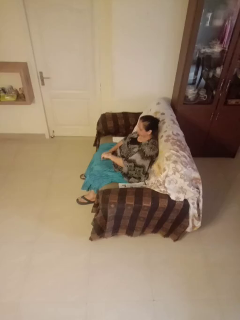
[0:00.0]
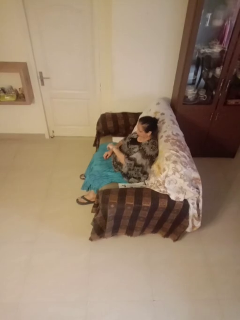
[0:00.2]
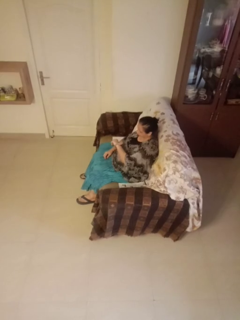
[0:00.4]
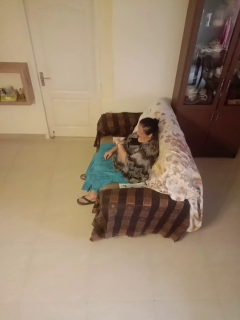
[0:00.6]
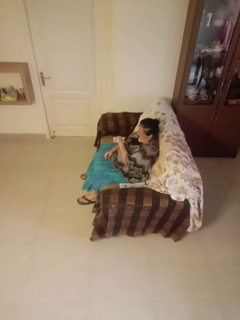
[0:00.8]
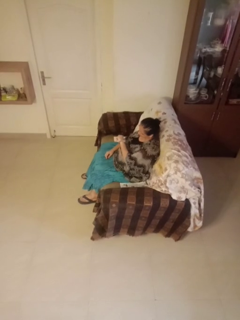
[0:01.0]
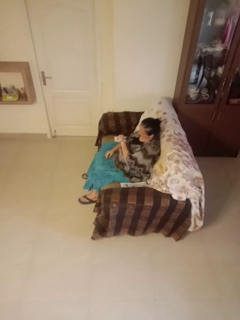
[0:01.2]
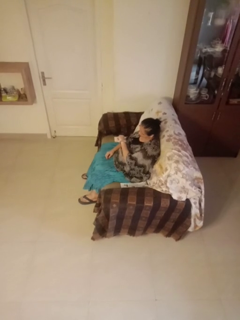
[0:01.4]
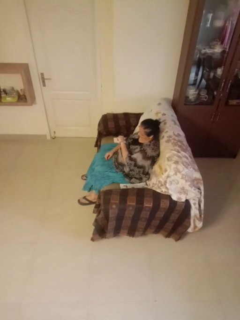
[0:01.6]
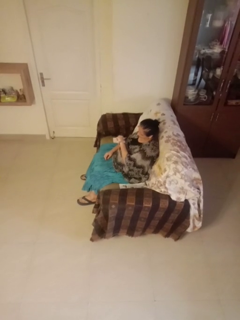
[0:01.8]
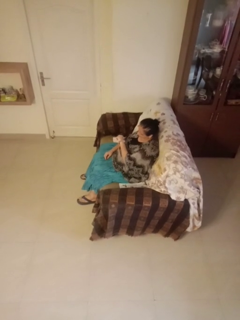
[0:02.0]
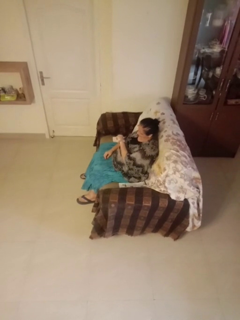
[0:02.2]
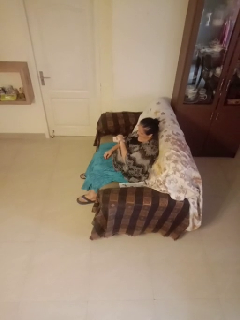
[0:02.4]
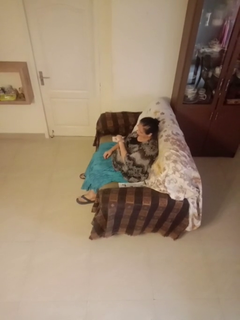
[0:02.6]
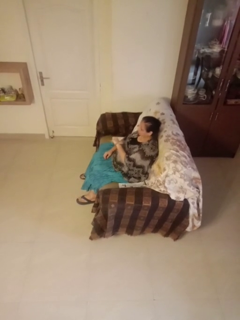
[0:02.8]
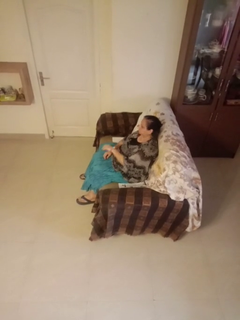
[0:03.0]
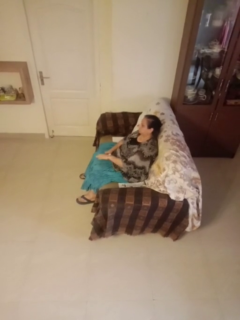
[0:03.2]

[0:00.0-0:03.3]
person looks at wristwatch

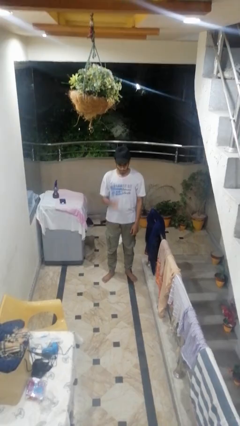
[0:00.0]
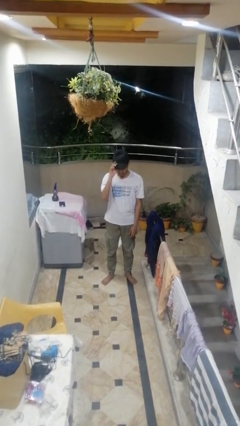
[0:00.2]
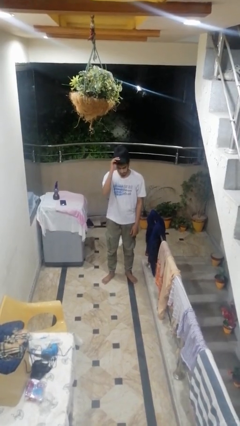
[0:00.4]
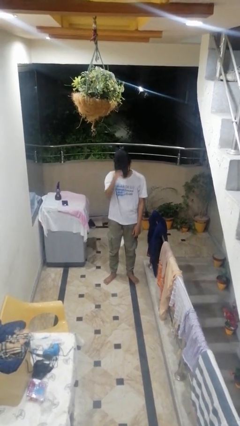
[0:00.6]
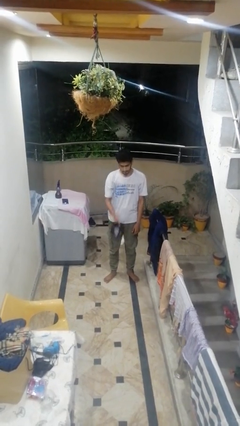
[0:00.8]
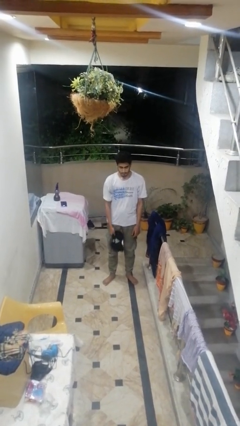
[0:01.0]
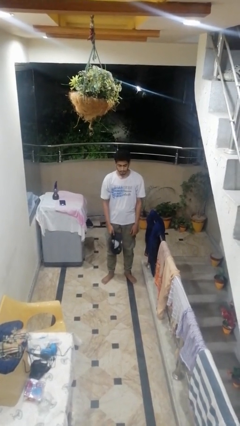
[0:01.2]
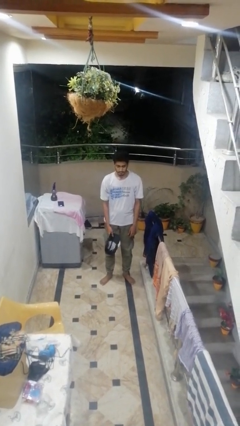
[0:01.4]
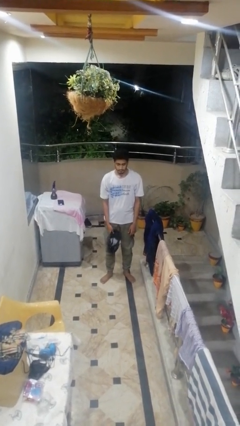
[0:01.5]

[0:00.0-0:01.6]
person takes off hat

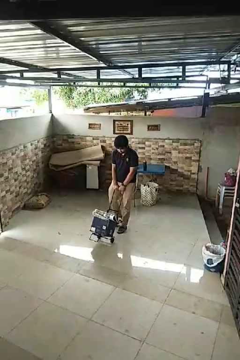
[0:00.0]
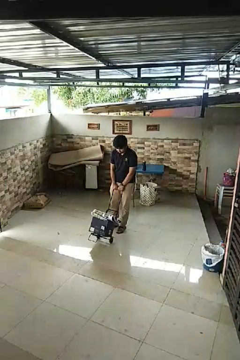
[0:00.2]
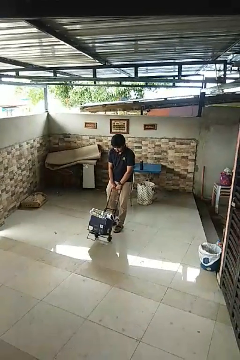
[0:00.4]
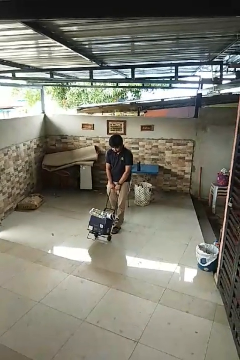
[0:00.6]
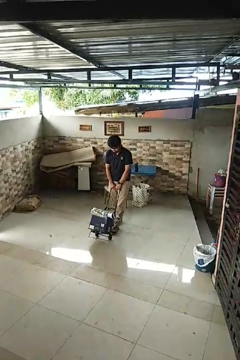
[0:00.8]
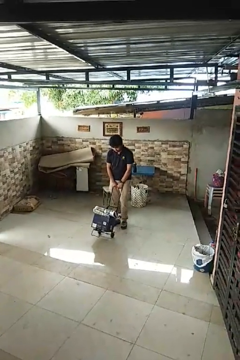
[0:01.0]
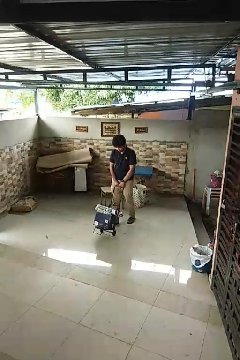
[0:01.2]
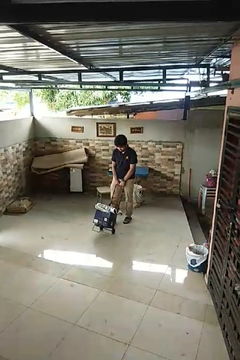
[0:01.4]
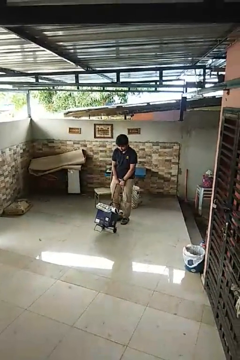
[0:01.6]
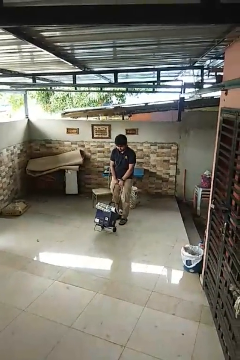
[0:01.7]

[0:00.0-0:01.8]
person pulls wheeled cart

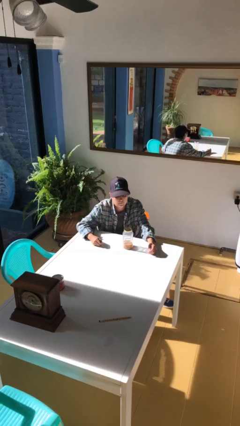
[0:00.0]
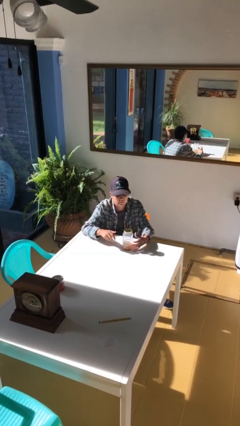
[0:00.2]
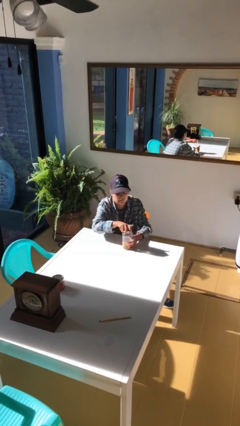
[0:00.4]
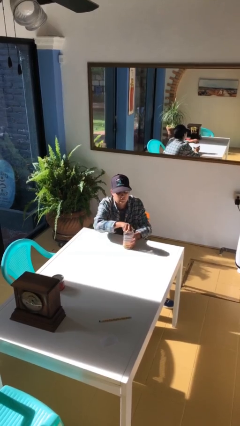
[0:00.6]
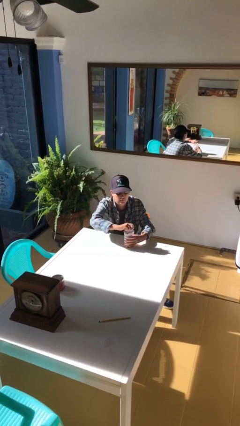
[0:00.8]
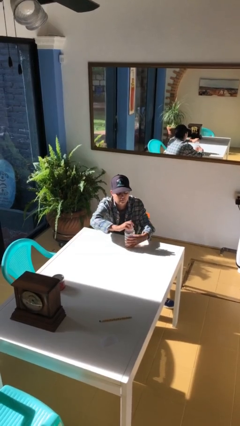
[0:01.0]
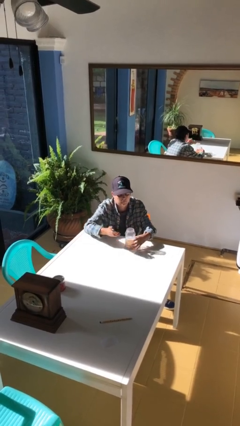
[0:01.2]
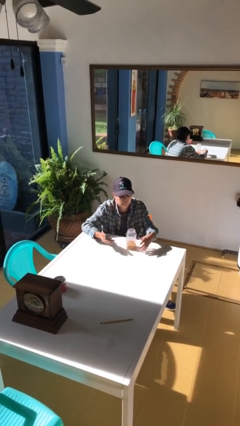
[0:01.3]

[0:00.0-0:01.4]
person opens jar

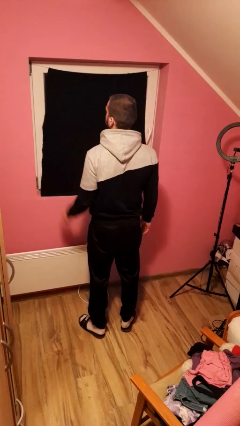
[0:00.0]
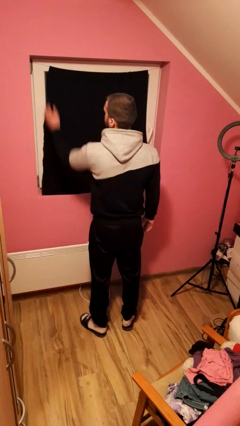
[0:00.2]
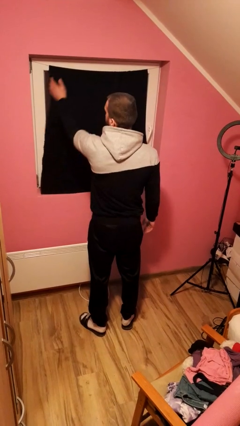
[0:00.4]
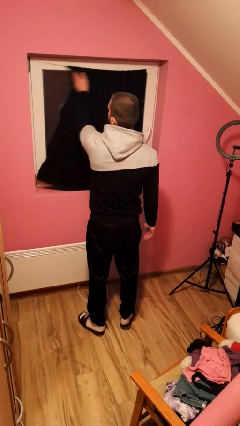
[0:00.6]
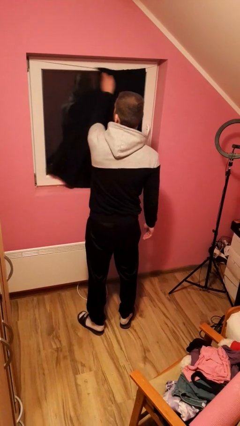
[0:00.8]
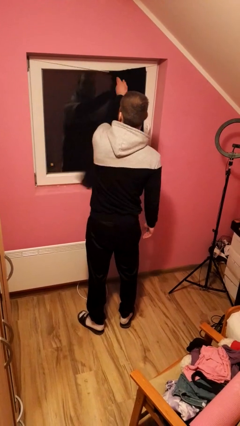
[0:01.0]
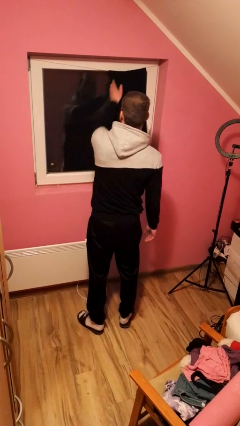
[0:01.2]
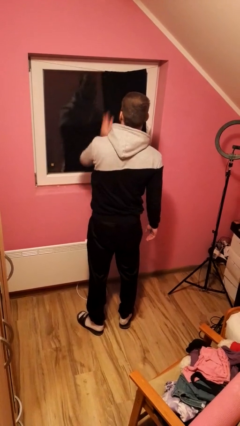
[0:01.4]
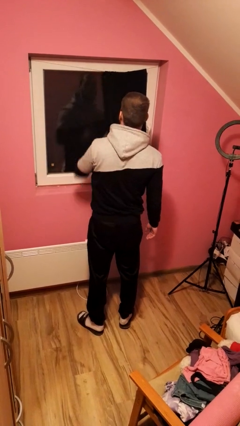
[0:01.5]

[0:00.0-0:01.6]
person opens curtains

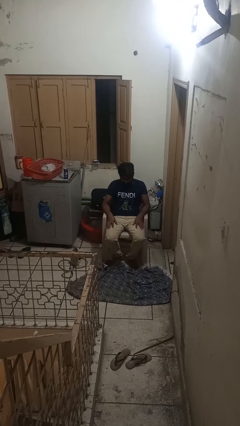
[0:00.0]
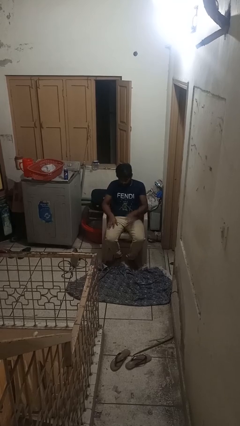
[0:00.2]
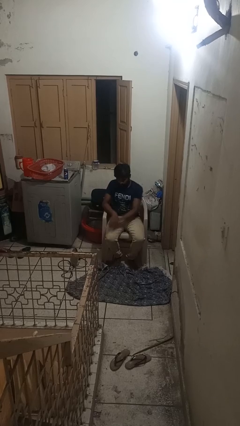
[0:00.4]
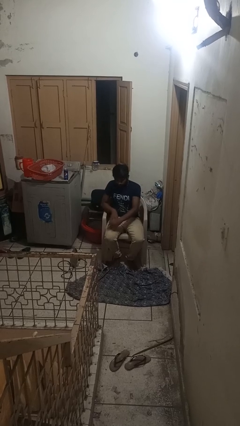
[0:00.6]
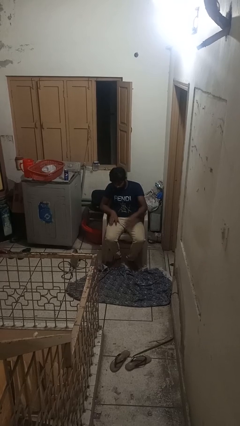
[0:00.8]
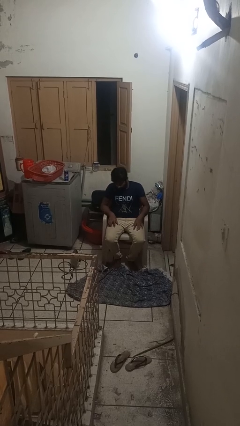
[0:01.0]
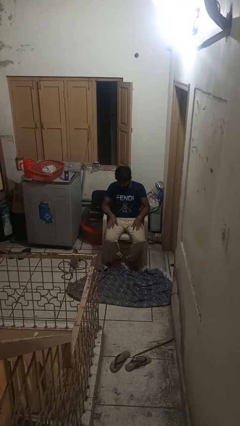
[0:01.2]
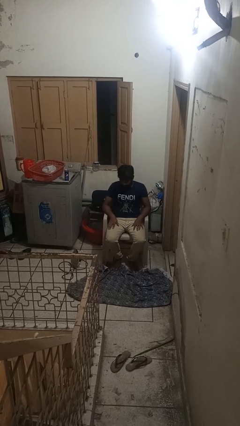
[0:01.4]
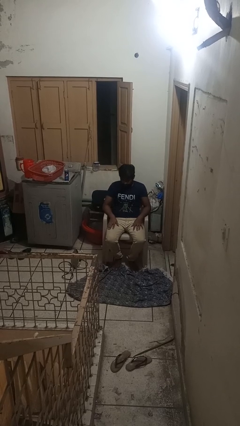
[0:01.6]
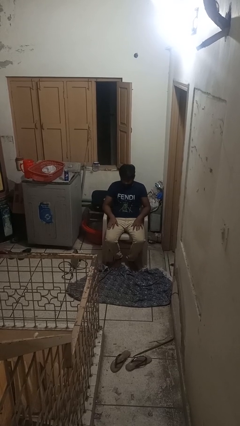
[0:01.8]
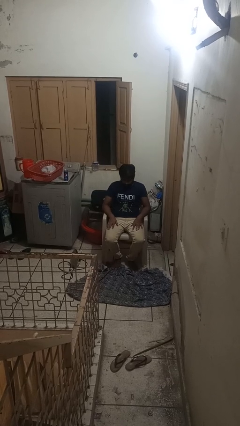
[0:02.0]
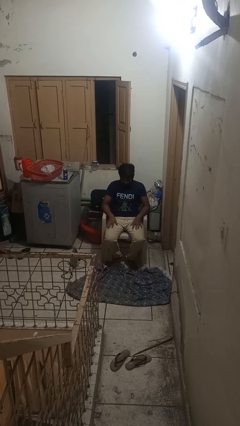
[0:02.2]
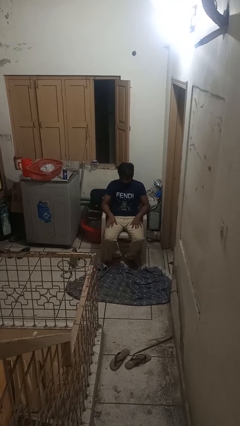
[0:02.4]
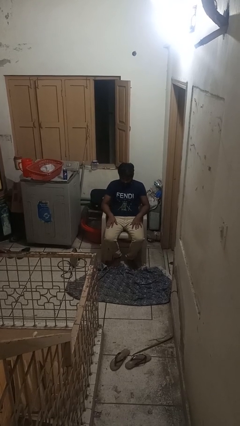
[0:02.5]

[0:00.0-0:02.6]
person swats bug

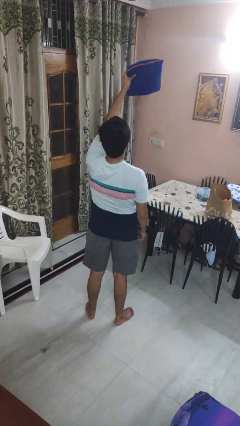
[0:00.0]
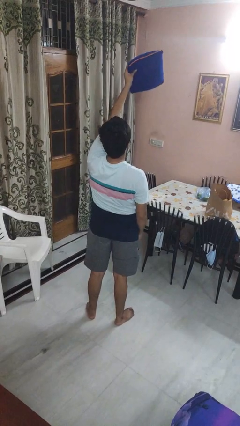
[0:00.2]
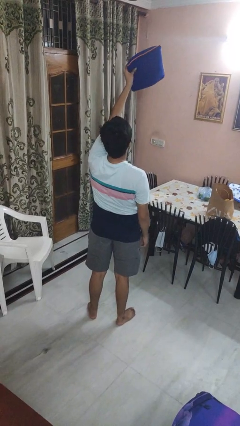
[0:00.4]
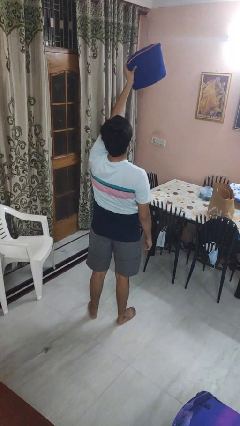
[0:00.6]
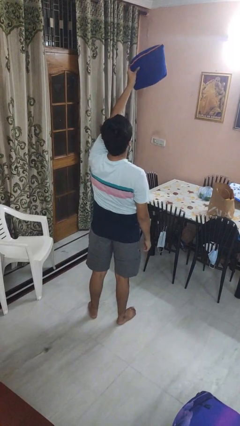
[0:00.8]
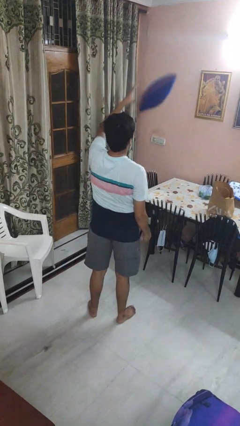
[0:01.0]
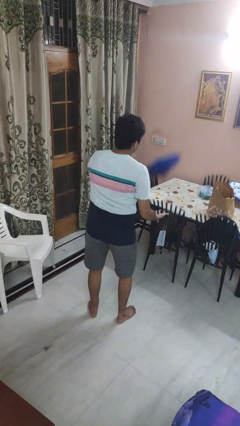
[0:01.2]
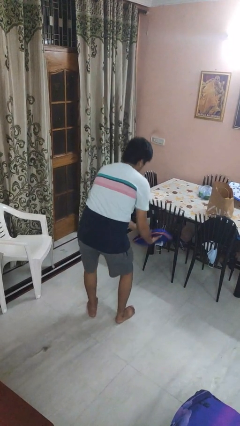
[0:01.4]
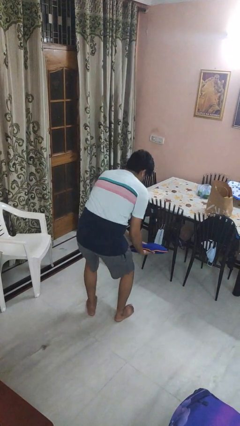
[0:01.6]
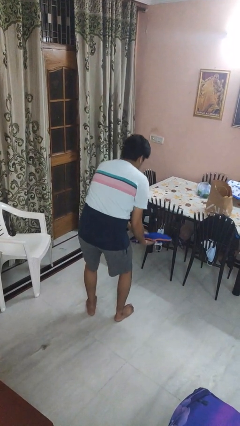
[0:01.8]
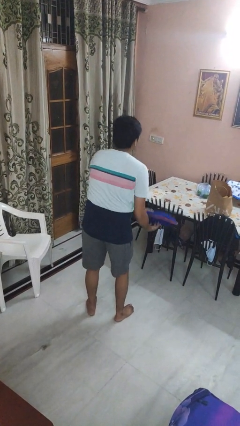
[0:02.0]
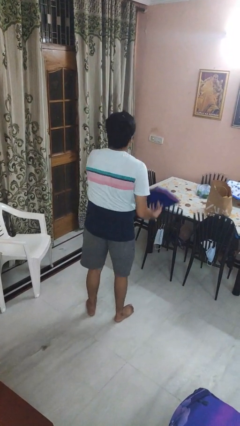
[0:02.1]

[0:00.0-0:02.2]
person catches dropped object

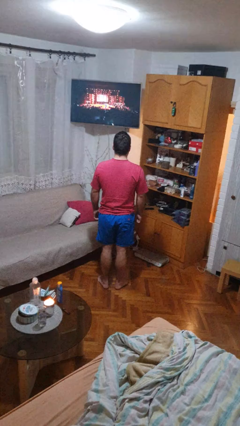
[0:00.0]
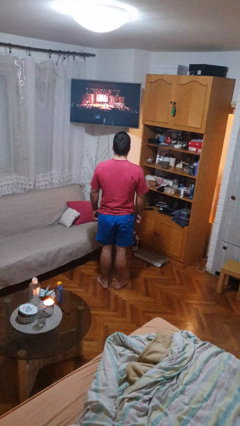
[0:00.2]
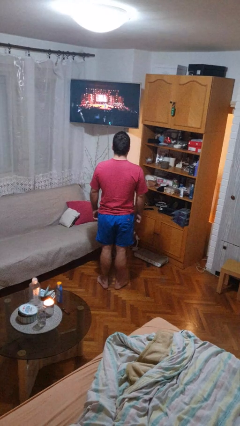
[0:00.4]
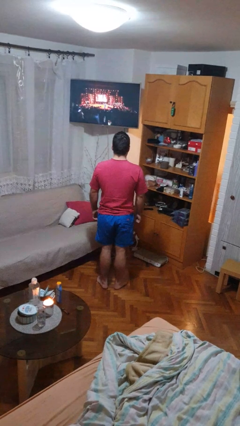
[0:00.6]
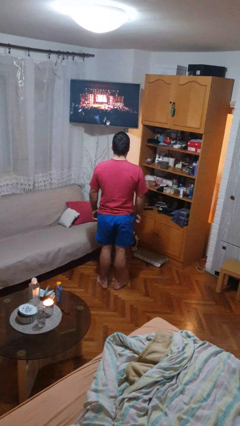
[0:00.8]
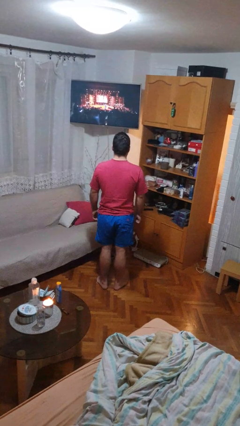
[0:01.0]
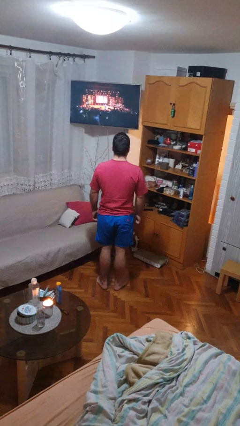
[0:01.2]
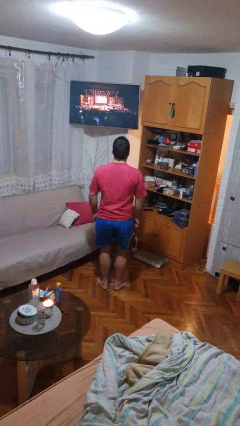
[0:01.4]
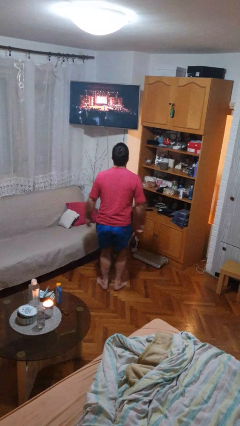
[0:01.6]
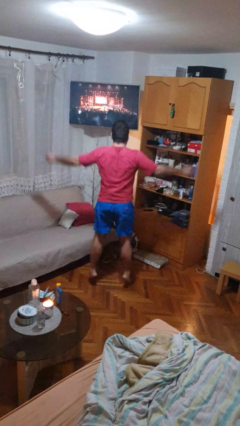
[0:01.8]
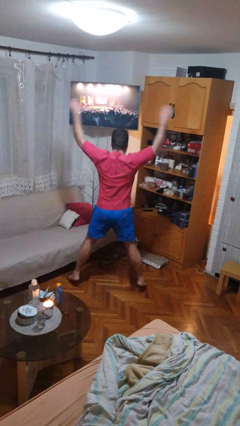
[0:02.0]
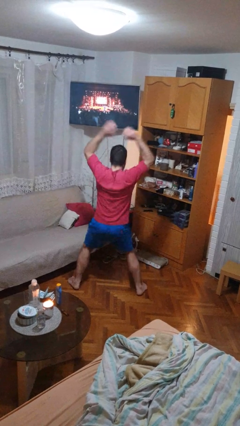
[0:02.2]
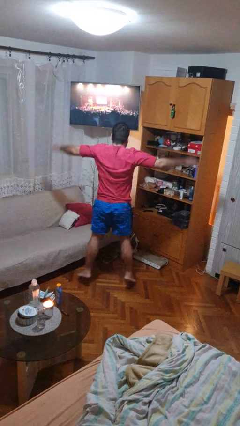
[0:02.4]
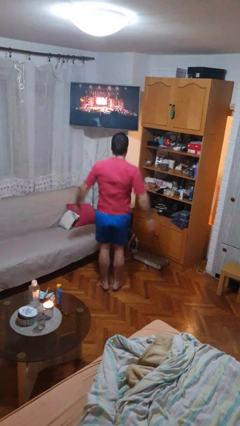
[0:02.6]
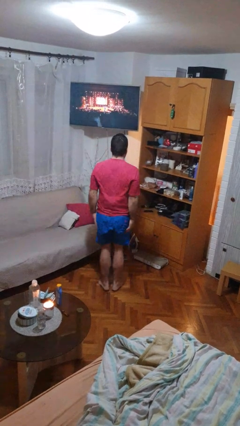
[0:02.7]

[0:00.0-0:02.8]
person exercises with jumping jacks

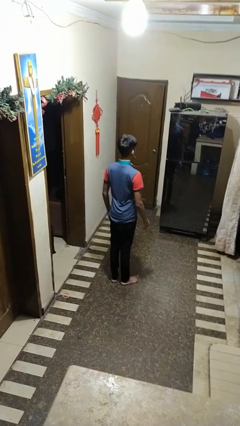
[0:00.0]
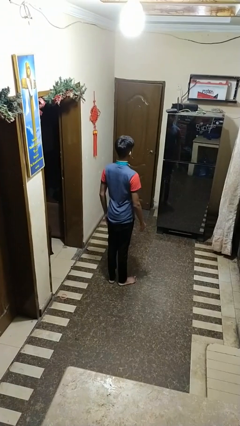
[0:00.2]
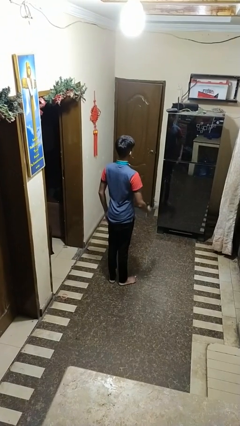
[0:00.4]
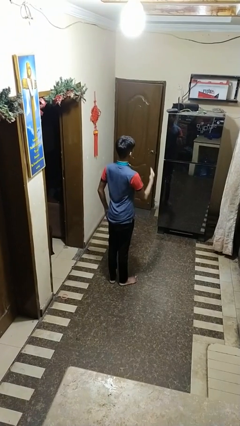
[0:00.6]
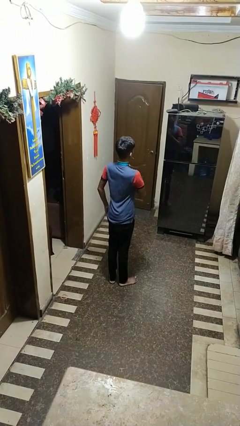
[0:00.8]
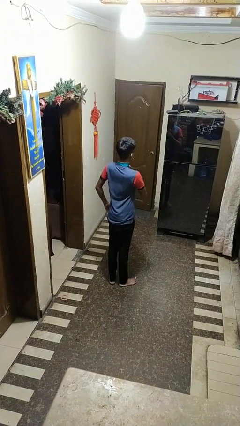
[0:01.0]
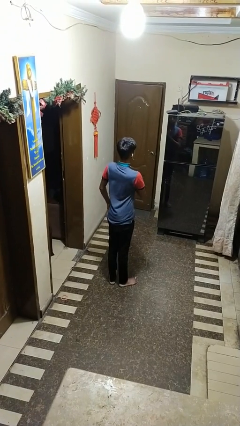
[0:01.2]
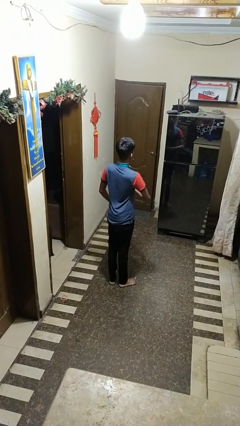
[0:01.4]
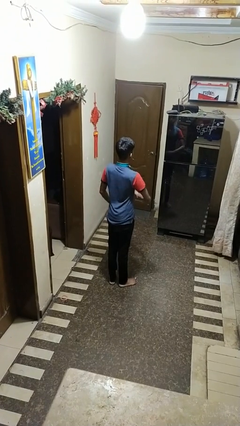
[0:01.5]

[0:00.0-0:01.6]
person drums on chest
